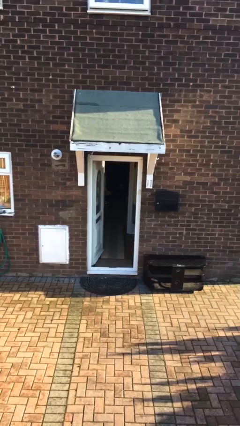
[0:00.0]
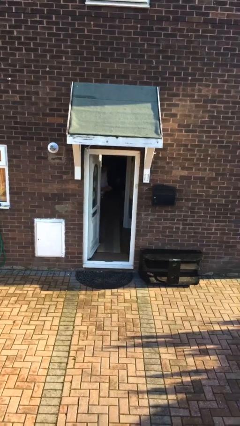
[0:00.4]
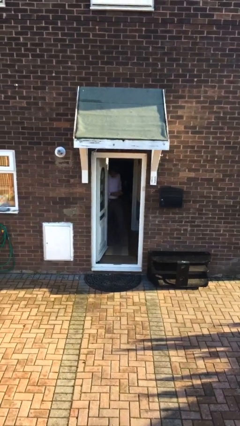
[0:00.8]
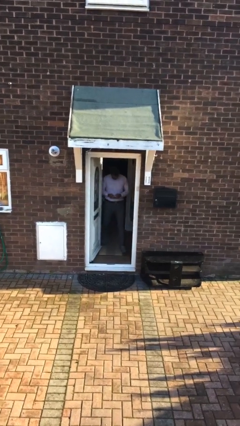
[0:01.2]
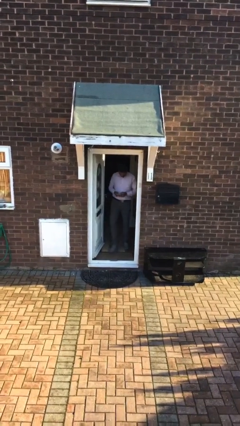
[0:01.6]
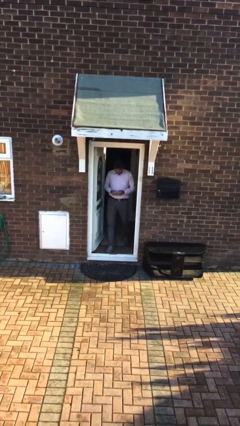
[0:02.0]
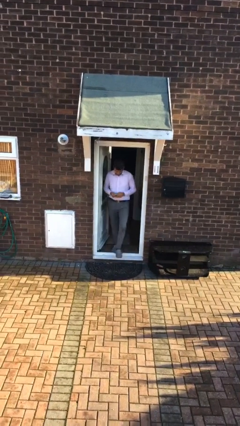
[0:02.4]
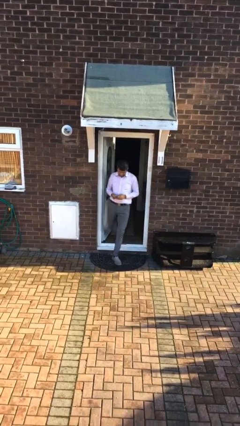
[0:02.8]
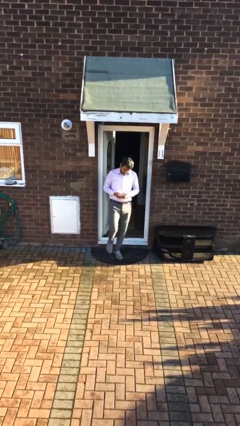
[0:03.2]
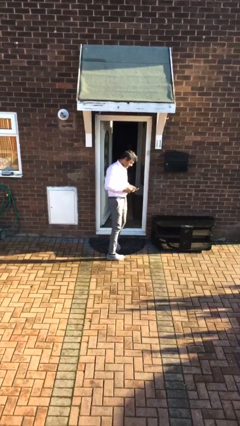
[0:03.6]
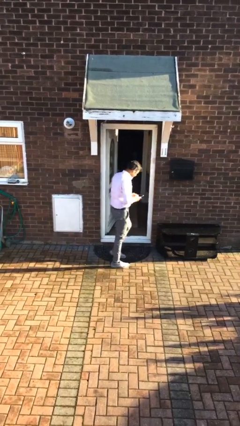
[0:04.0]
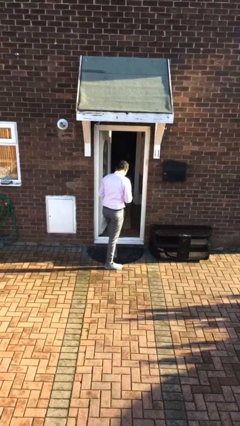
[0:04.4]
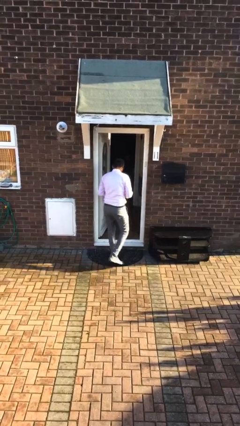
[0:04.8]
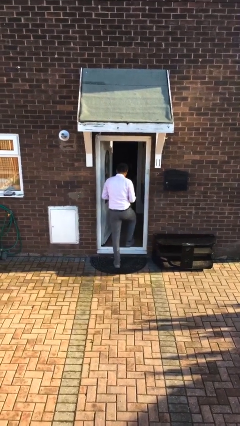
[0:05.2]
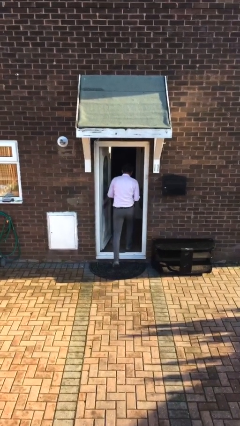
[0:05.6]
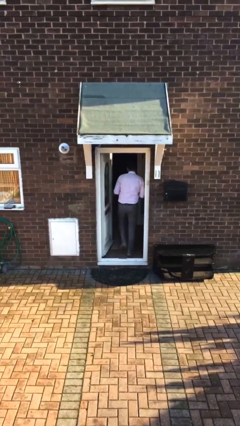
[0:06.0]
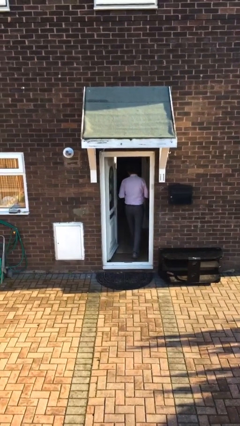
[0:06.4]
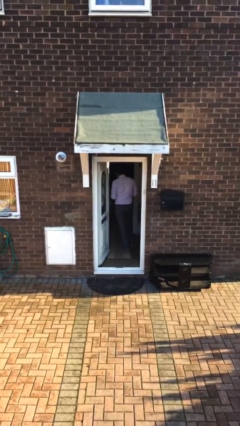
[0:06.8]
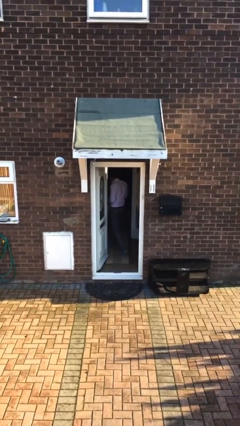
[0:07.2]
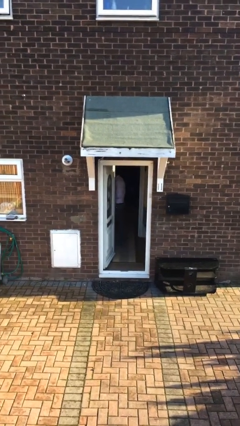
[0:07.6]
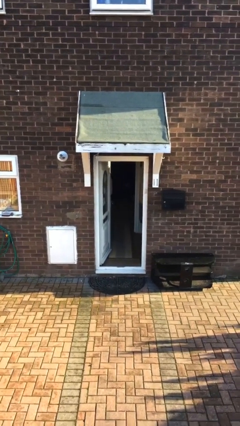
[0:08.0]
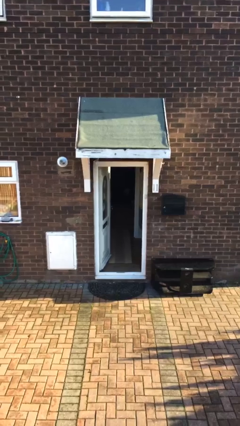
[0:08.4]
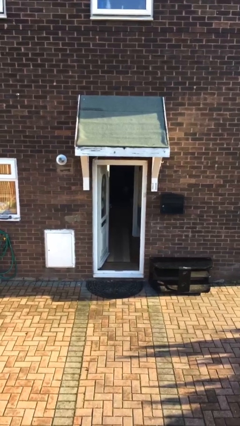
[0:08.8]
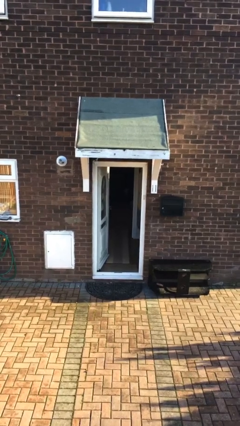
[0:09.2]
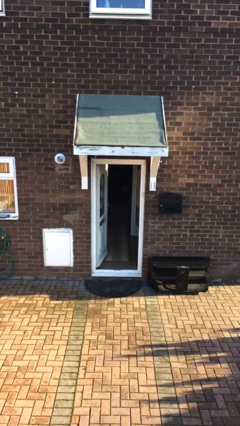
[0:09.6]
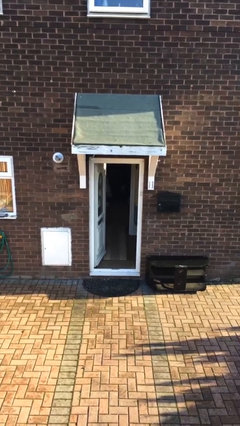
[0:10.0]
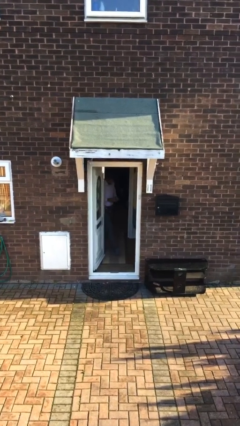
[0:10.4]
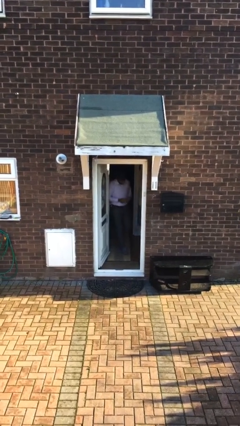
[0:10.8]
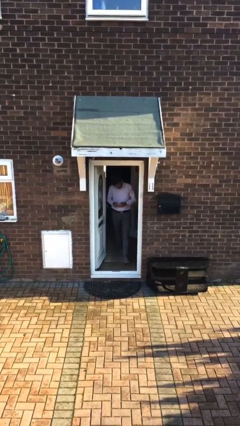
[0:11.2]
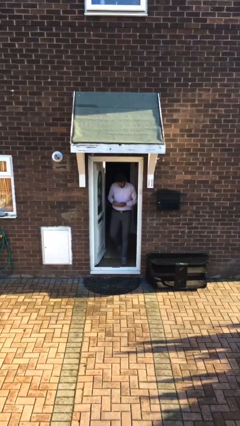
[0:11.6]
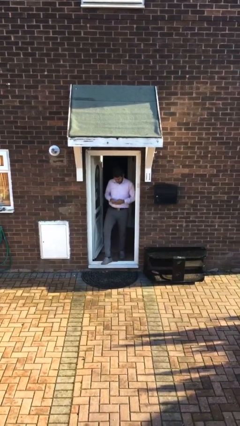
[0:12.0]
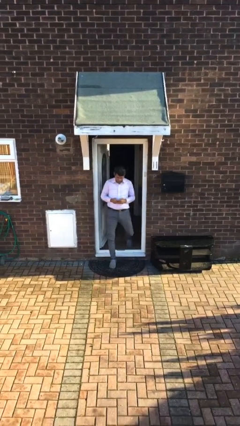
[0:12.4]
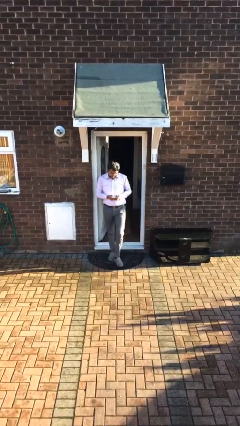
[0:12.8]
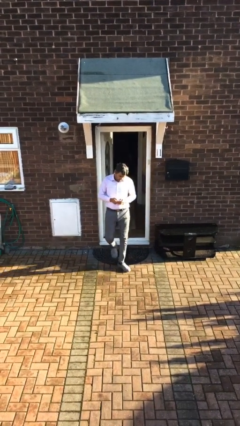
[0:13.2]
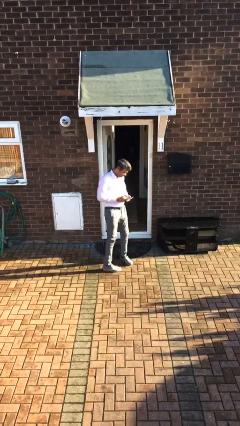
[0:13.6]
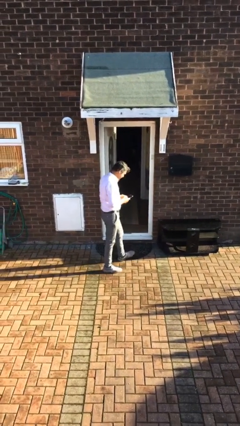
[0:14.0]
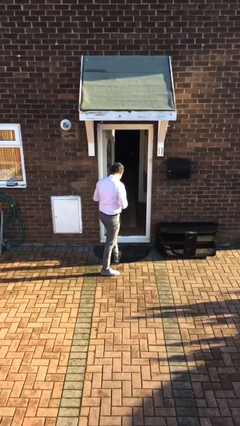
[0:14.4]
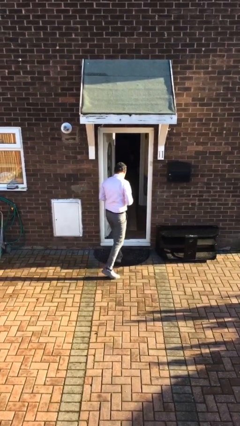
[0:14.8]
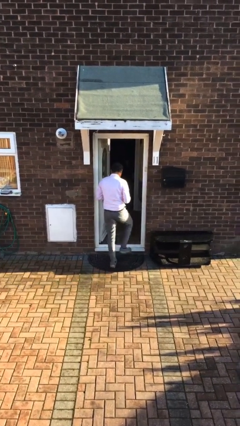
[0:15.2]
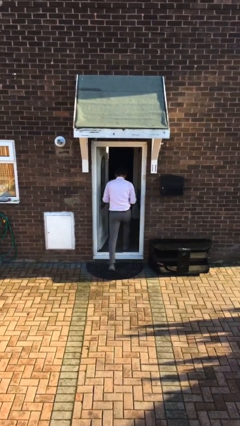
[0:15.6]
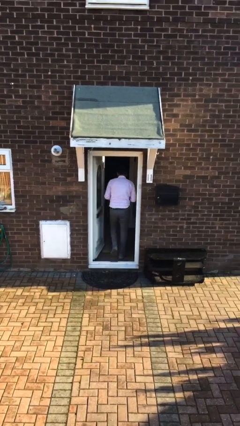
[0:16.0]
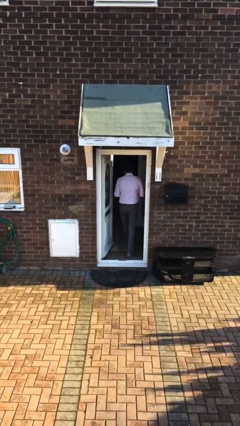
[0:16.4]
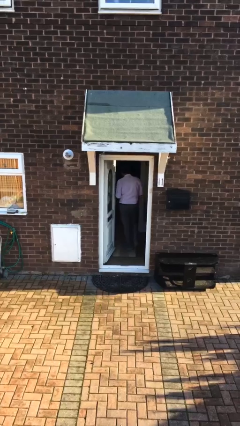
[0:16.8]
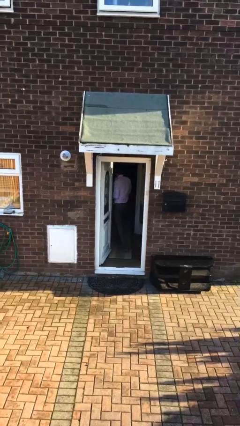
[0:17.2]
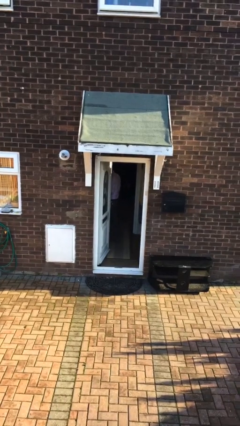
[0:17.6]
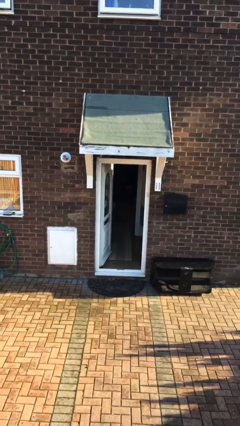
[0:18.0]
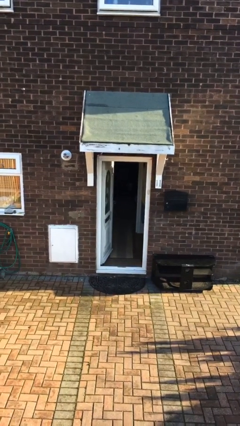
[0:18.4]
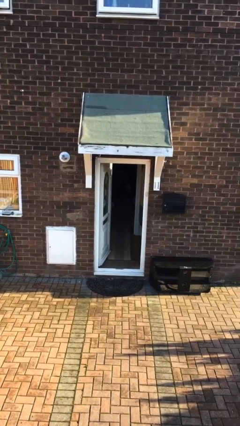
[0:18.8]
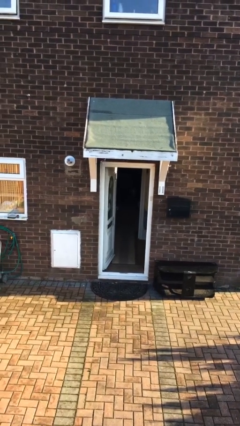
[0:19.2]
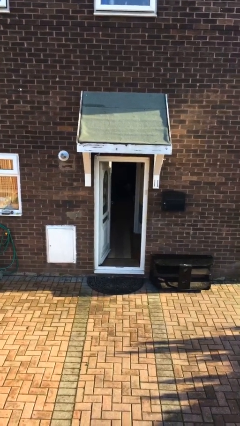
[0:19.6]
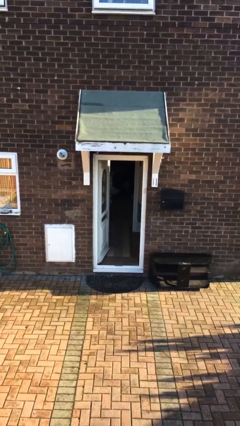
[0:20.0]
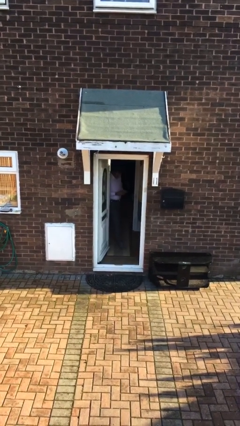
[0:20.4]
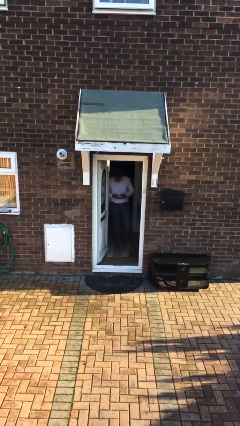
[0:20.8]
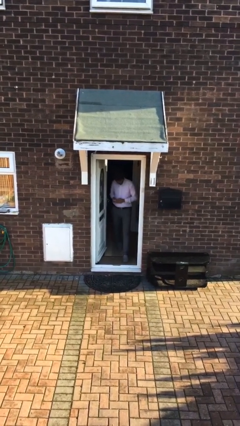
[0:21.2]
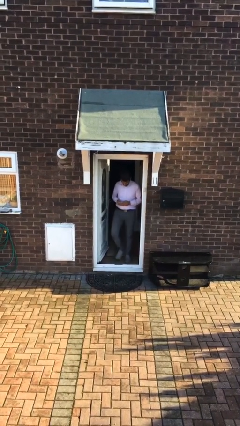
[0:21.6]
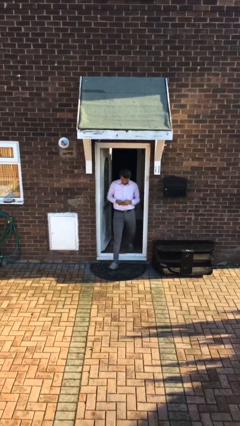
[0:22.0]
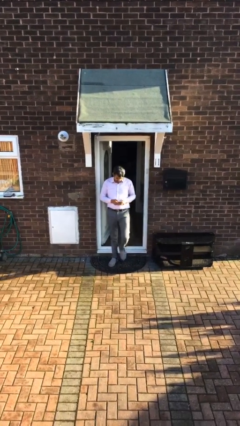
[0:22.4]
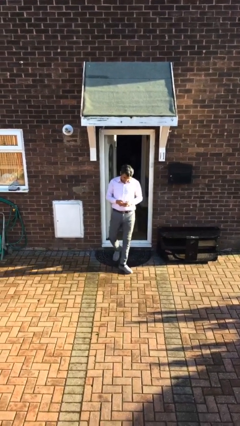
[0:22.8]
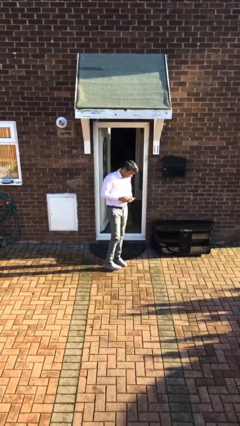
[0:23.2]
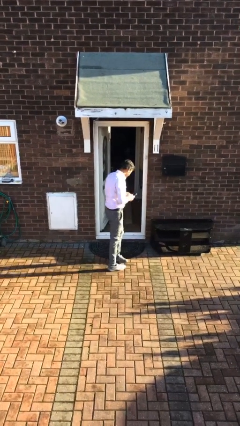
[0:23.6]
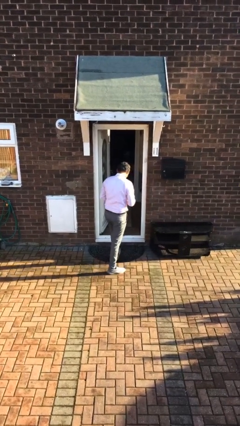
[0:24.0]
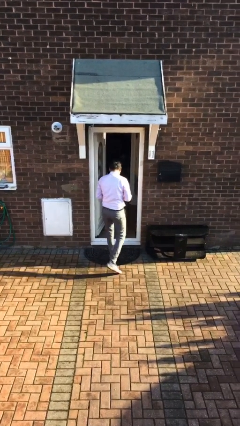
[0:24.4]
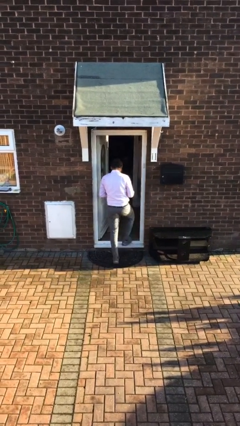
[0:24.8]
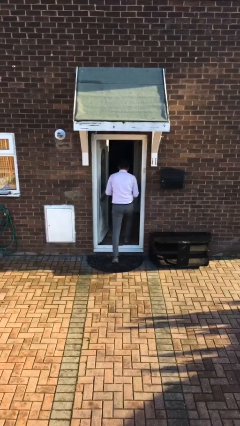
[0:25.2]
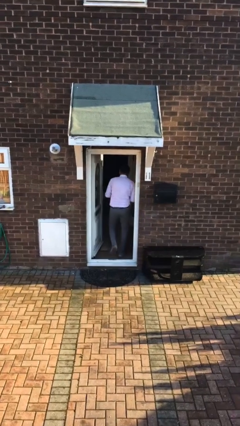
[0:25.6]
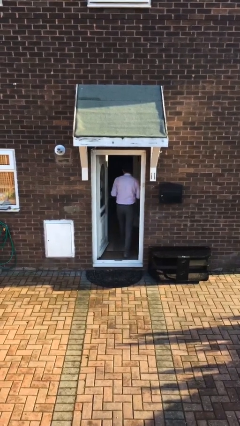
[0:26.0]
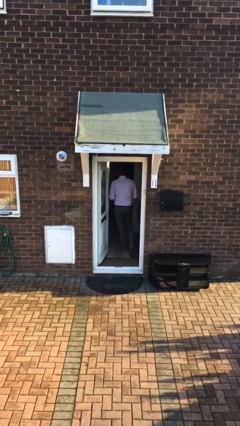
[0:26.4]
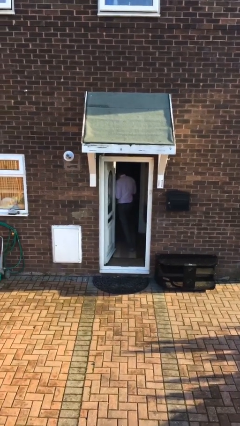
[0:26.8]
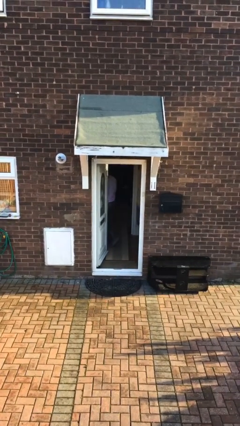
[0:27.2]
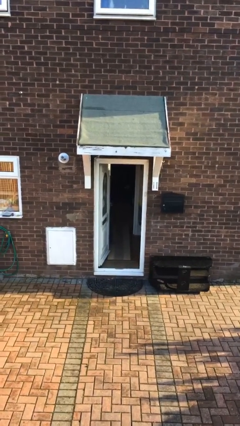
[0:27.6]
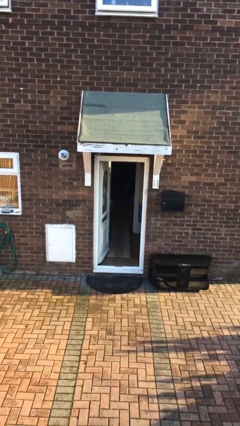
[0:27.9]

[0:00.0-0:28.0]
person texts on phone

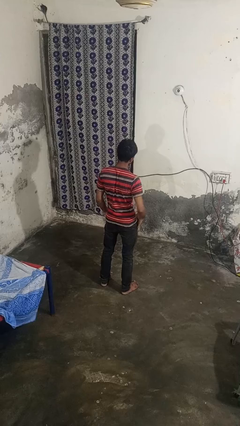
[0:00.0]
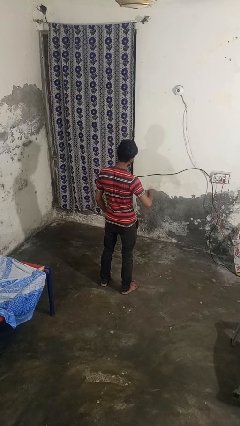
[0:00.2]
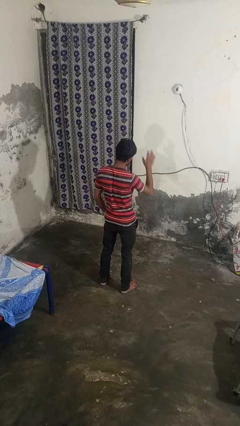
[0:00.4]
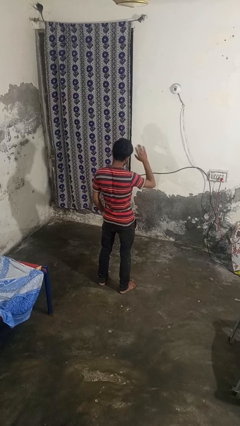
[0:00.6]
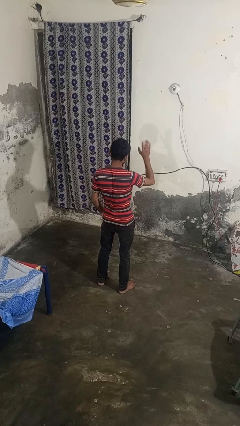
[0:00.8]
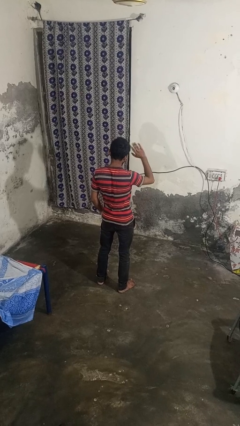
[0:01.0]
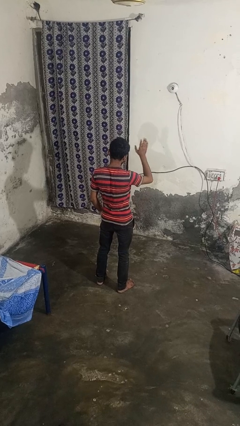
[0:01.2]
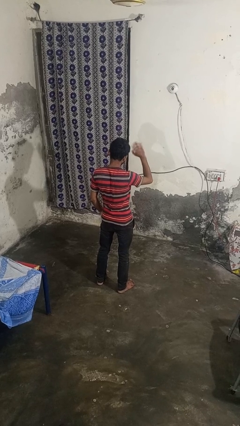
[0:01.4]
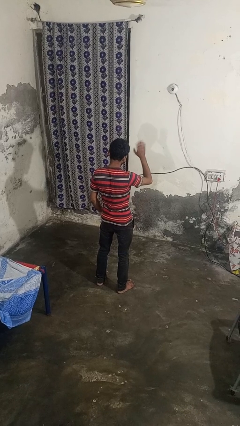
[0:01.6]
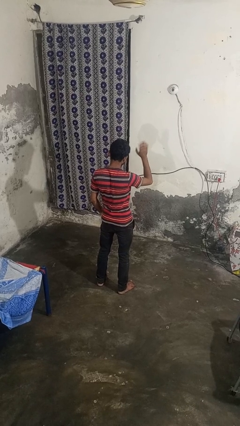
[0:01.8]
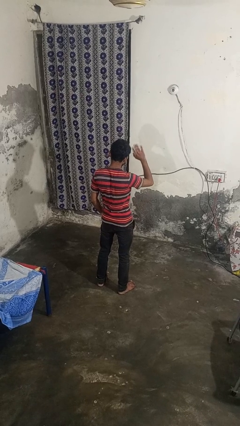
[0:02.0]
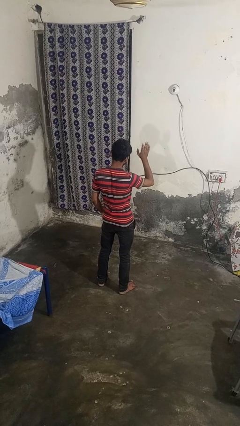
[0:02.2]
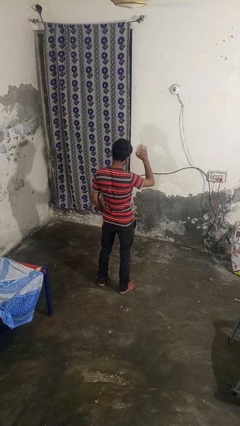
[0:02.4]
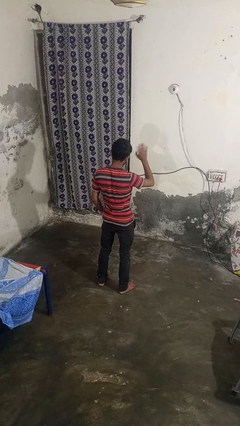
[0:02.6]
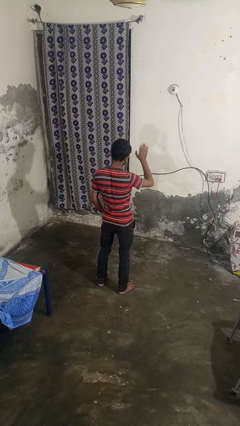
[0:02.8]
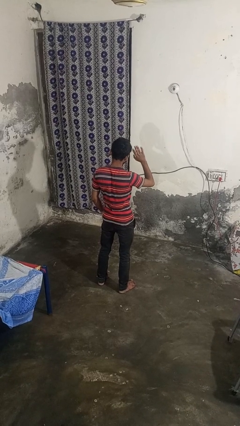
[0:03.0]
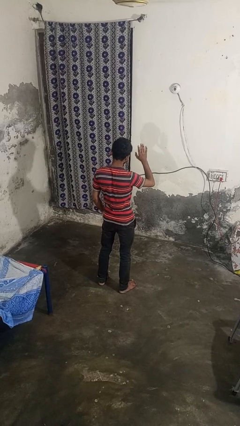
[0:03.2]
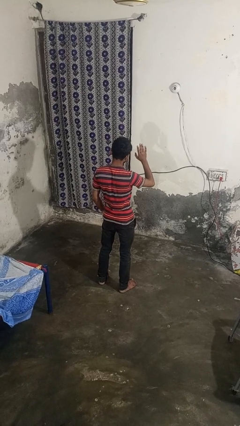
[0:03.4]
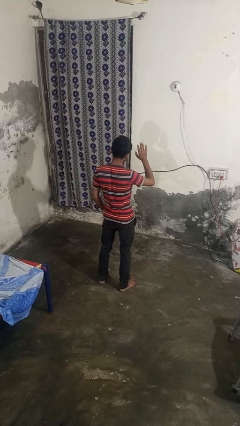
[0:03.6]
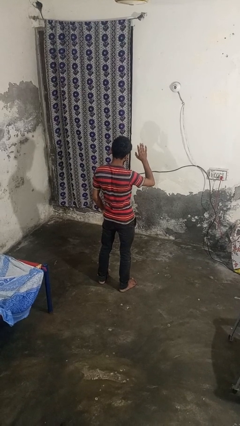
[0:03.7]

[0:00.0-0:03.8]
person waves at person
